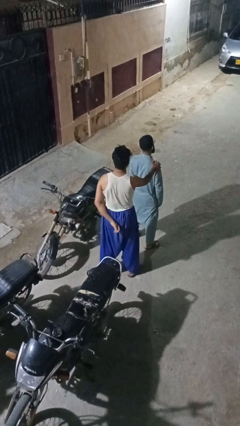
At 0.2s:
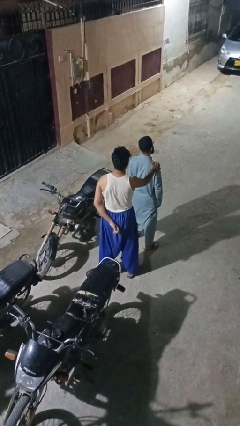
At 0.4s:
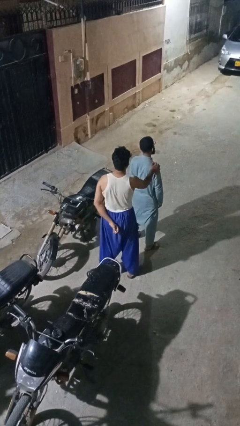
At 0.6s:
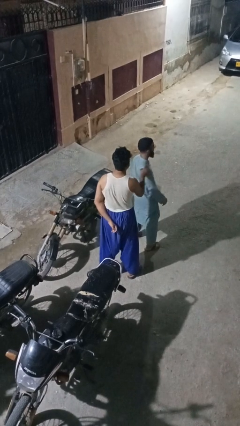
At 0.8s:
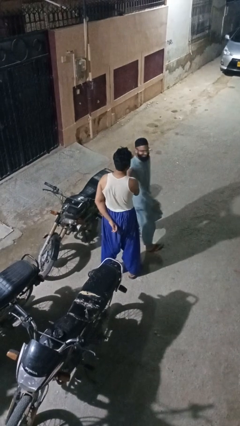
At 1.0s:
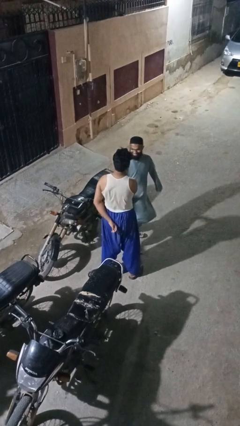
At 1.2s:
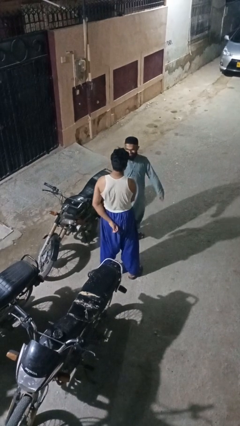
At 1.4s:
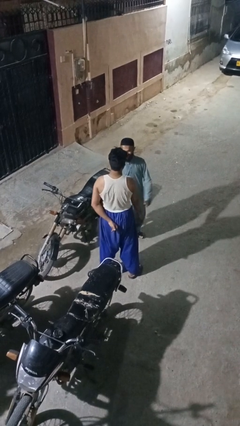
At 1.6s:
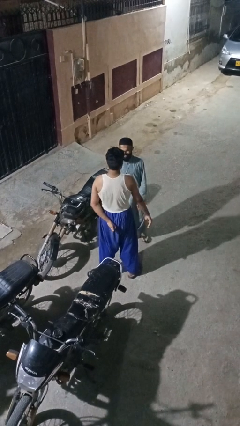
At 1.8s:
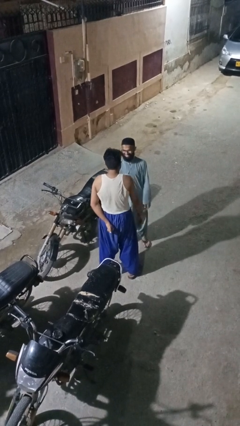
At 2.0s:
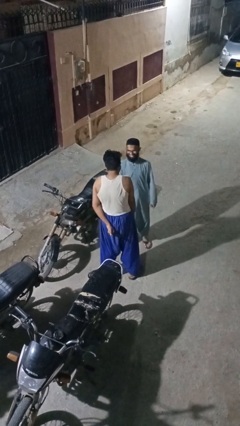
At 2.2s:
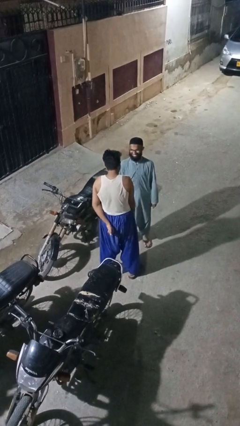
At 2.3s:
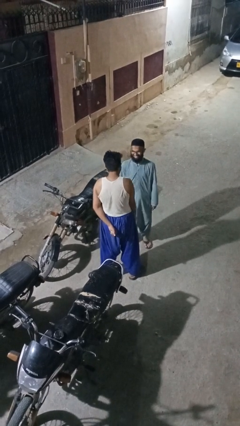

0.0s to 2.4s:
person spins person around

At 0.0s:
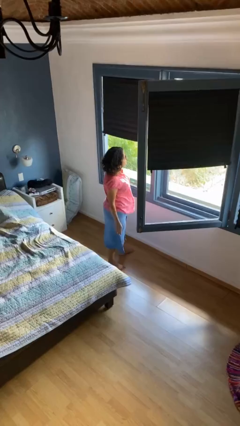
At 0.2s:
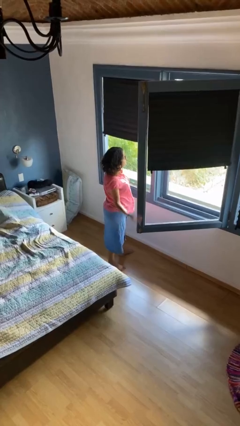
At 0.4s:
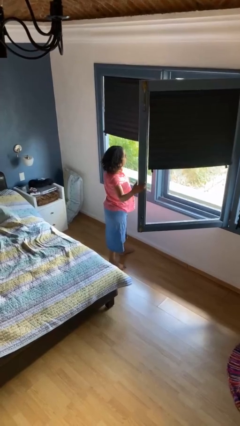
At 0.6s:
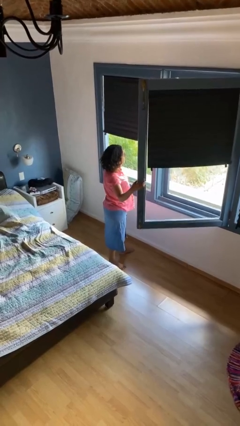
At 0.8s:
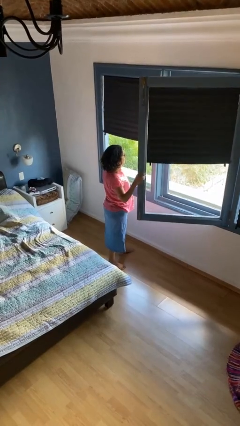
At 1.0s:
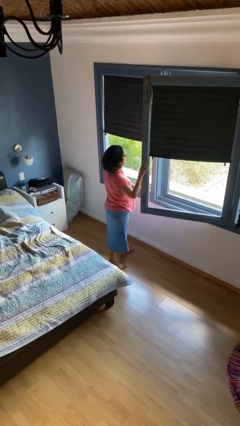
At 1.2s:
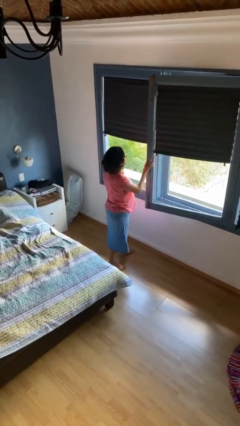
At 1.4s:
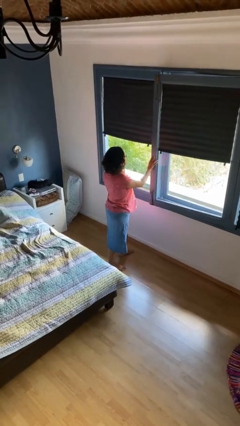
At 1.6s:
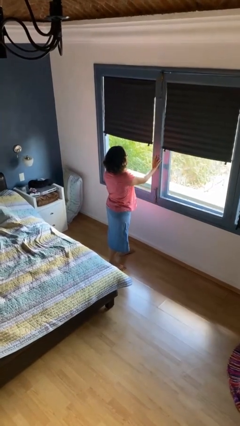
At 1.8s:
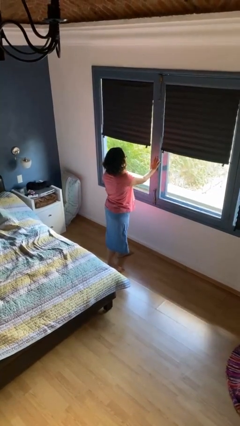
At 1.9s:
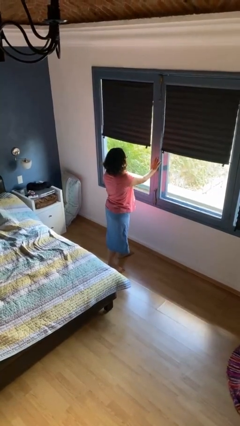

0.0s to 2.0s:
person closes home window

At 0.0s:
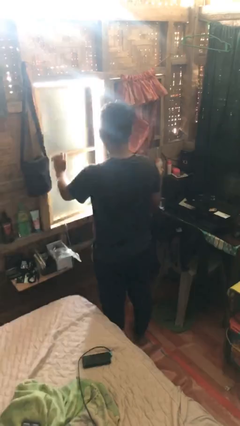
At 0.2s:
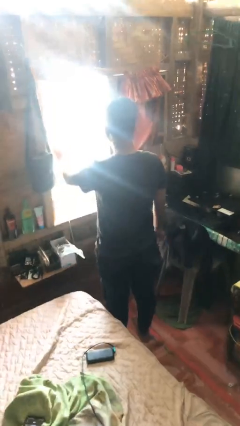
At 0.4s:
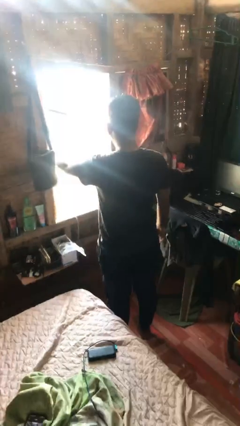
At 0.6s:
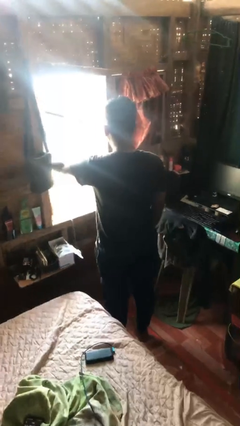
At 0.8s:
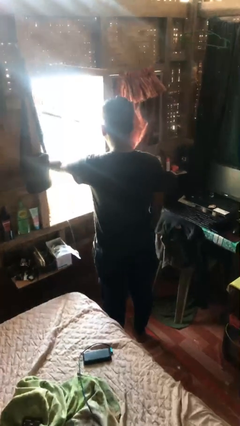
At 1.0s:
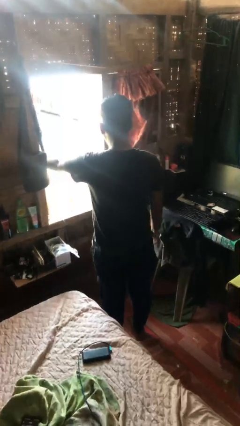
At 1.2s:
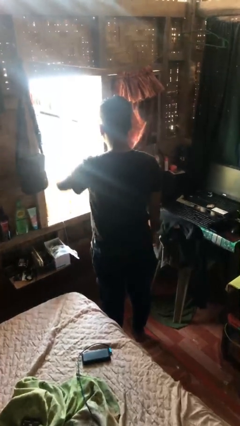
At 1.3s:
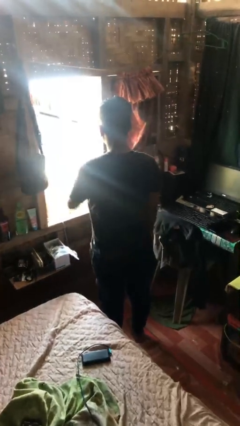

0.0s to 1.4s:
person opens home window

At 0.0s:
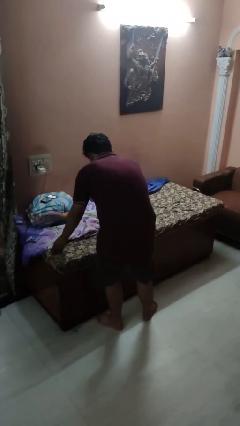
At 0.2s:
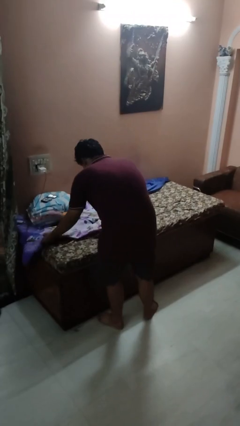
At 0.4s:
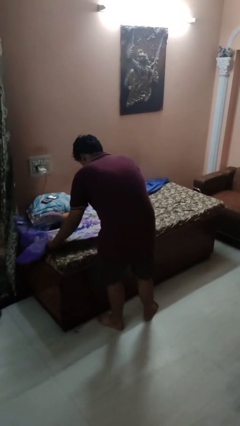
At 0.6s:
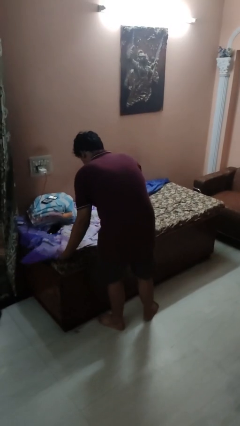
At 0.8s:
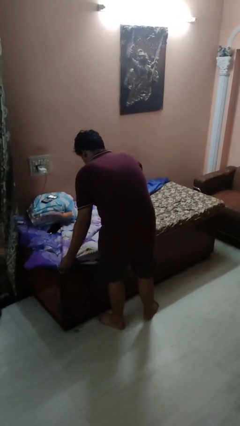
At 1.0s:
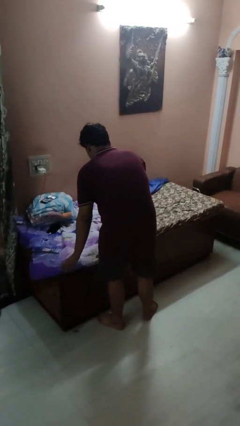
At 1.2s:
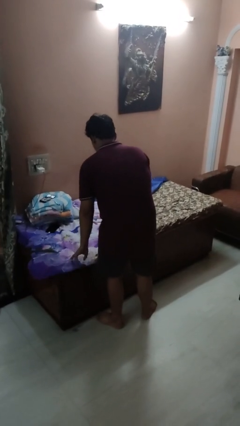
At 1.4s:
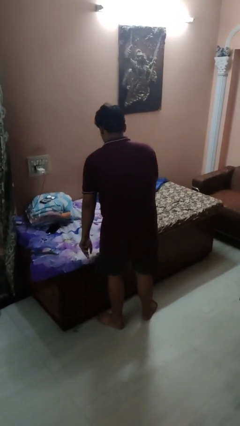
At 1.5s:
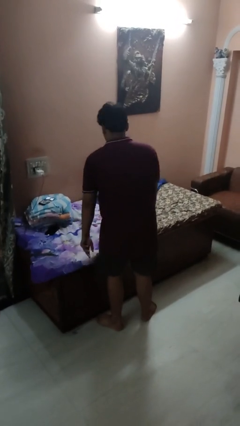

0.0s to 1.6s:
person makes bed

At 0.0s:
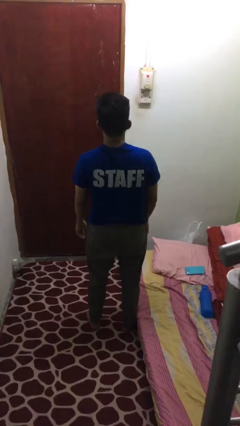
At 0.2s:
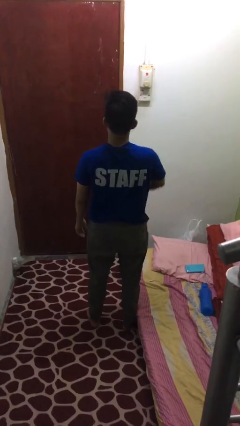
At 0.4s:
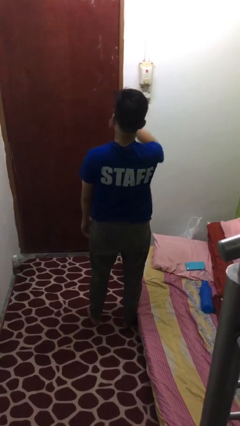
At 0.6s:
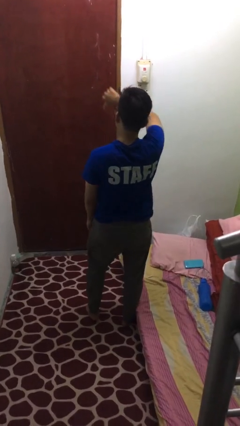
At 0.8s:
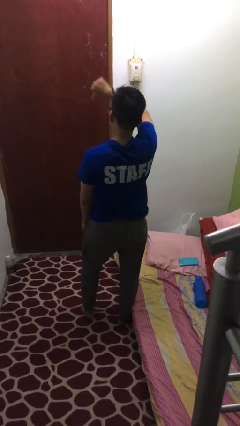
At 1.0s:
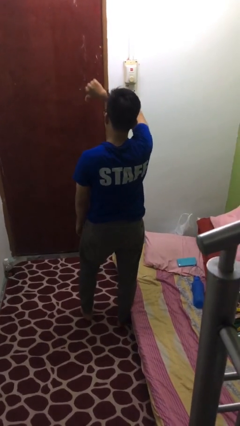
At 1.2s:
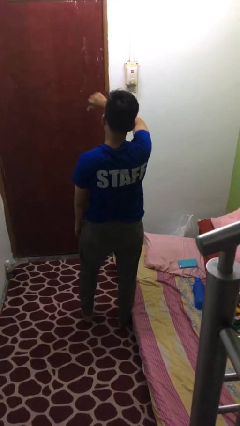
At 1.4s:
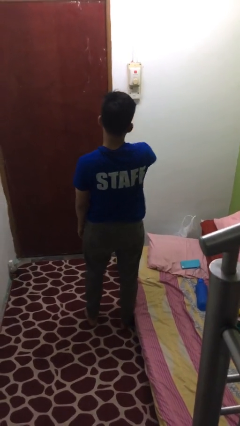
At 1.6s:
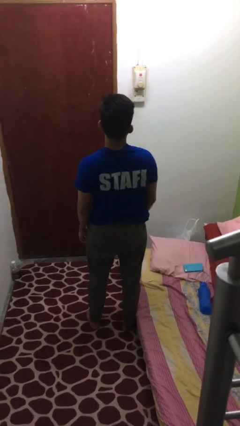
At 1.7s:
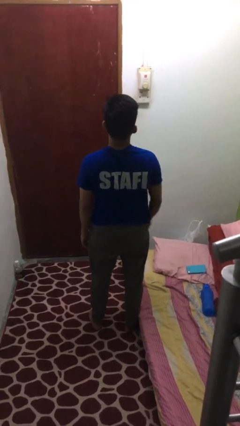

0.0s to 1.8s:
person gestures thumbs down

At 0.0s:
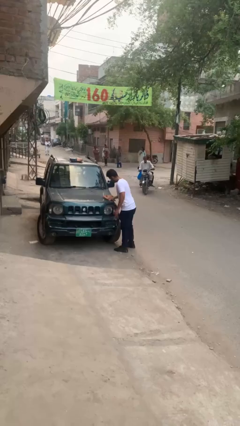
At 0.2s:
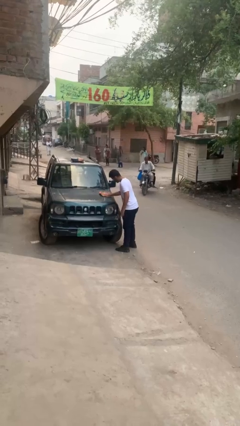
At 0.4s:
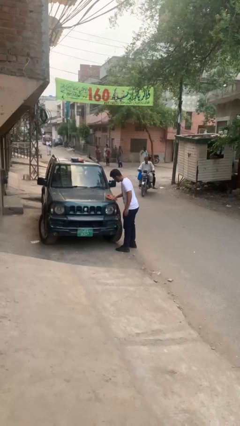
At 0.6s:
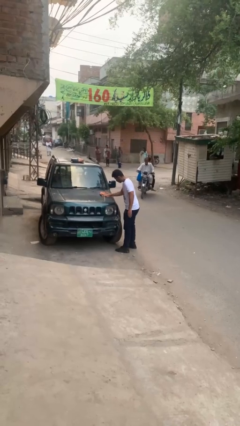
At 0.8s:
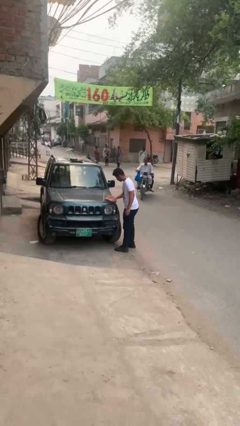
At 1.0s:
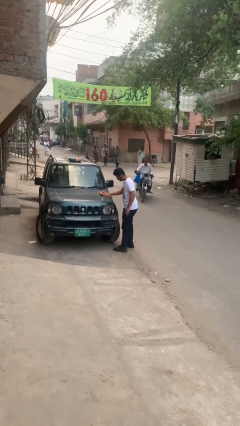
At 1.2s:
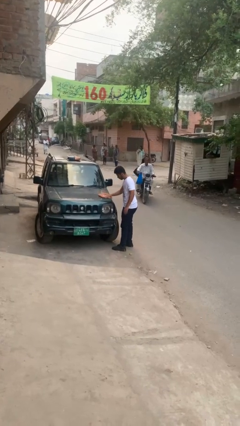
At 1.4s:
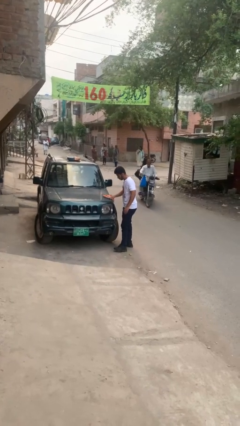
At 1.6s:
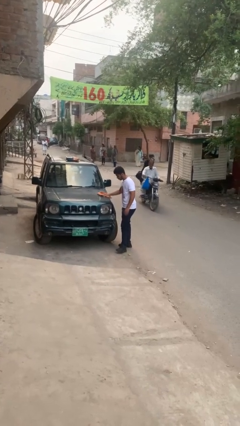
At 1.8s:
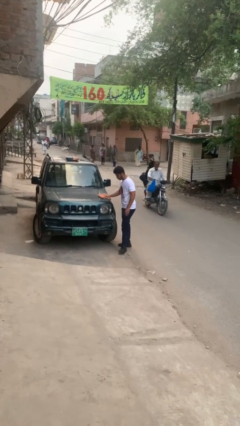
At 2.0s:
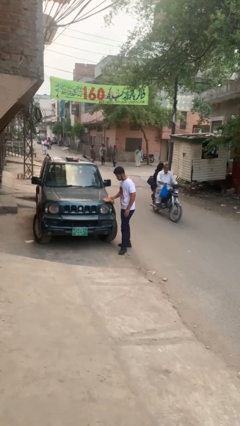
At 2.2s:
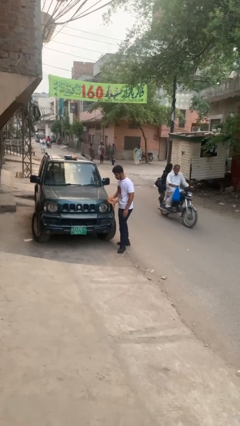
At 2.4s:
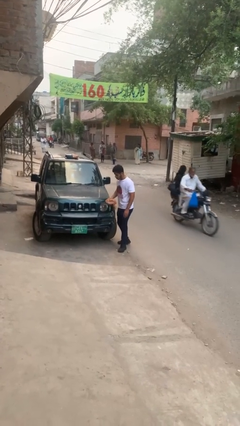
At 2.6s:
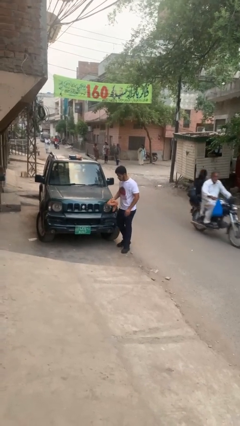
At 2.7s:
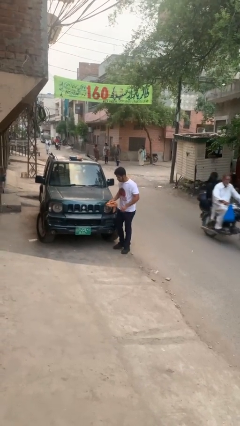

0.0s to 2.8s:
person polishes car with rag

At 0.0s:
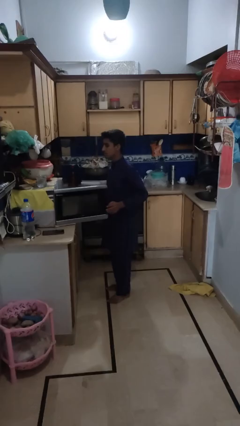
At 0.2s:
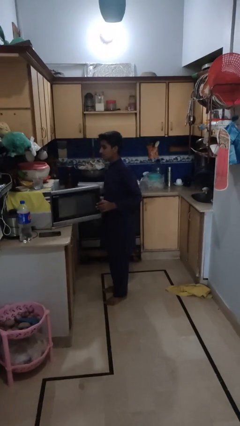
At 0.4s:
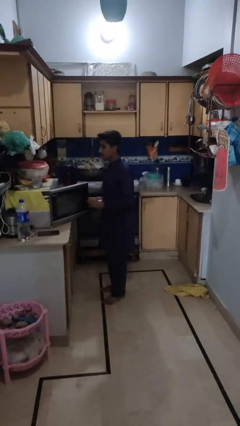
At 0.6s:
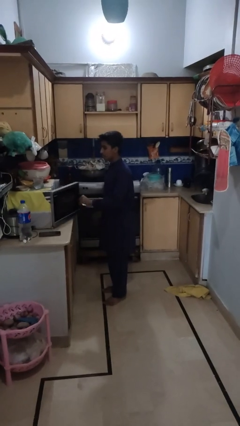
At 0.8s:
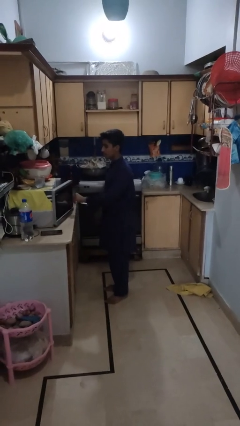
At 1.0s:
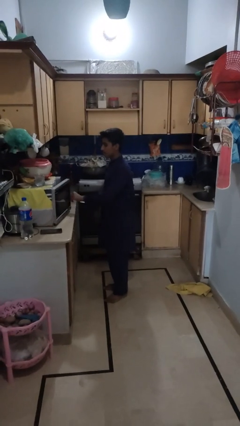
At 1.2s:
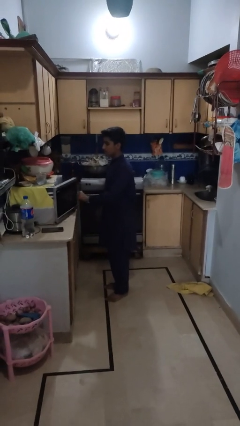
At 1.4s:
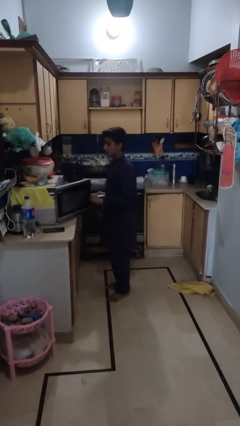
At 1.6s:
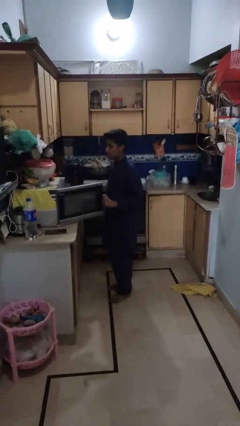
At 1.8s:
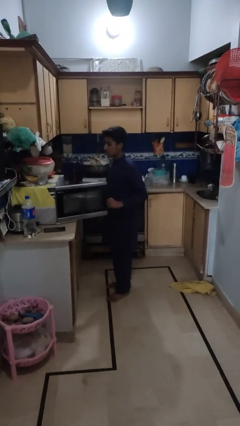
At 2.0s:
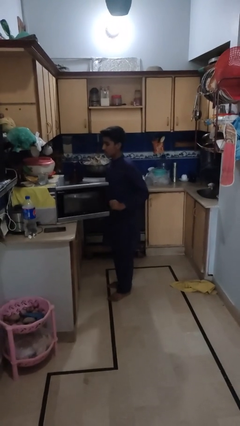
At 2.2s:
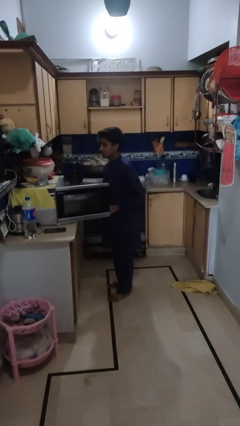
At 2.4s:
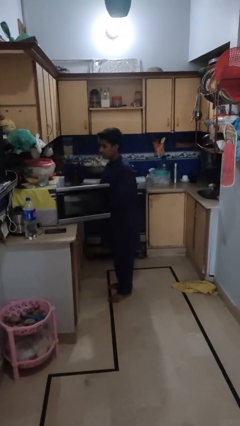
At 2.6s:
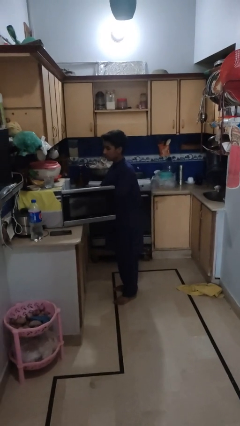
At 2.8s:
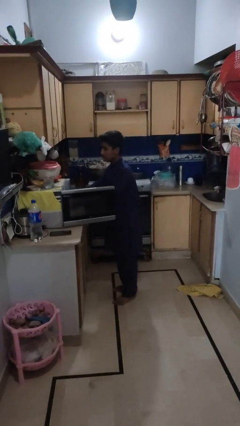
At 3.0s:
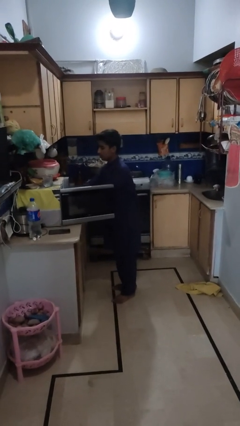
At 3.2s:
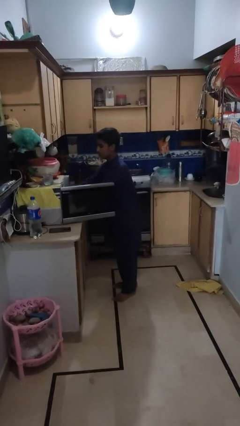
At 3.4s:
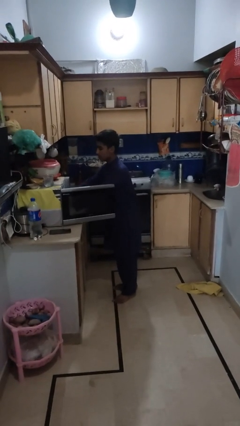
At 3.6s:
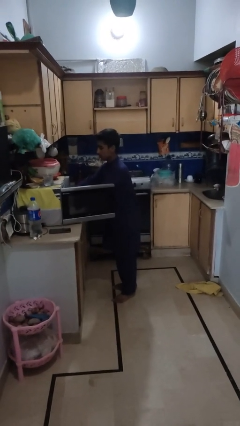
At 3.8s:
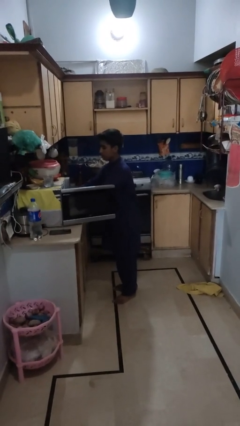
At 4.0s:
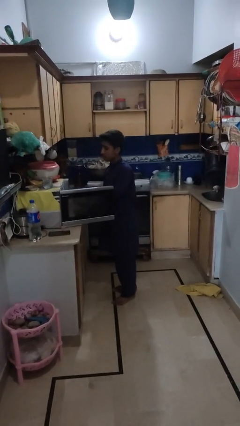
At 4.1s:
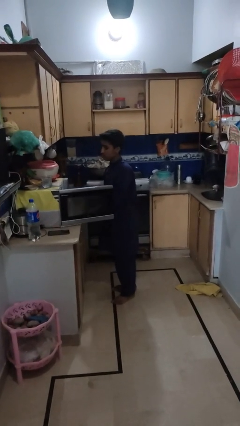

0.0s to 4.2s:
person puts object into microwave

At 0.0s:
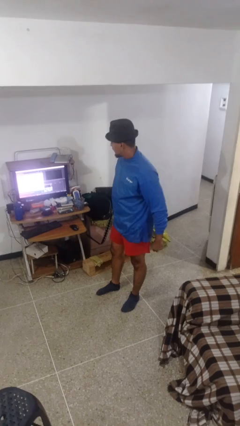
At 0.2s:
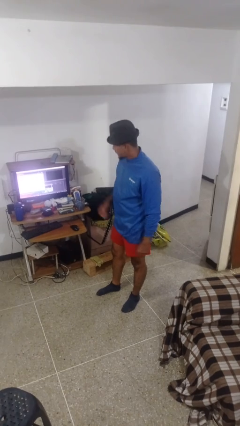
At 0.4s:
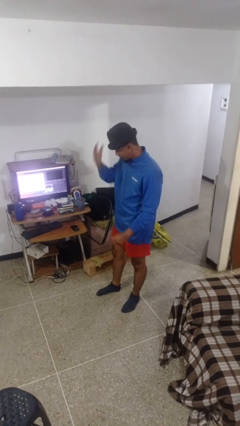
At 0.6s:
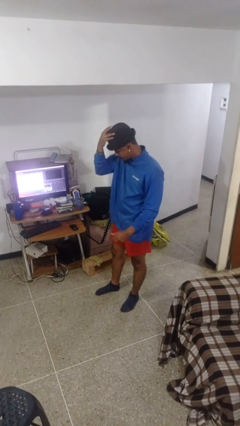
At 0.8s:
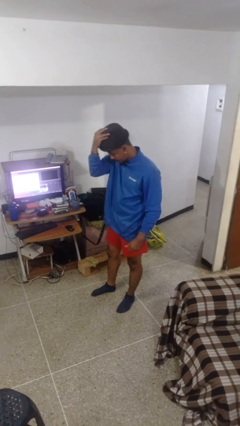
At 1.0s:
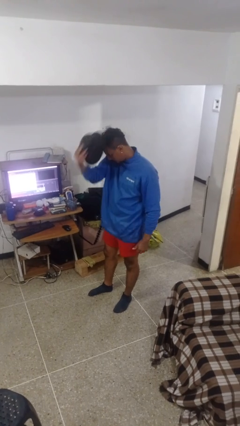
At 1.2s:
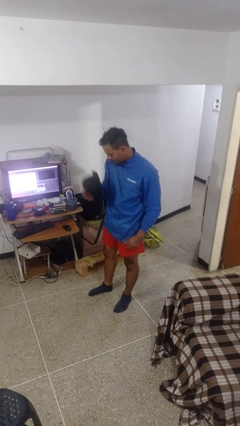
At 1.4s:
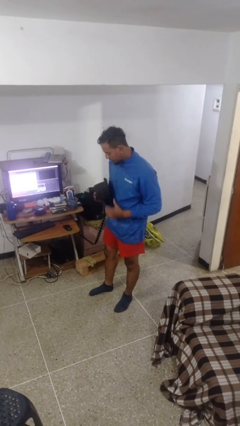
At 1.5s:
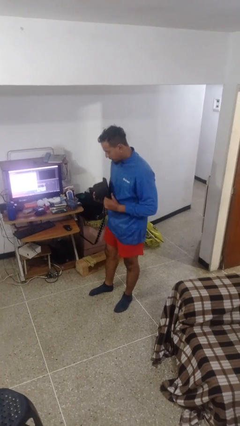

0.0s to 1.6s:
person takes off hat
